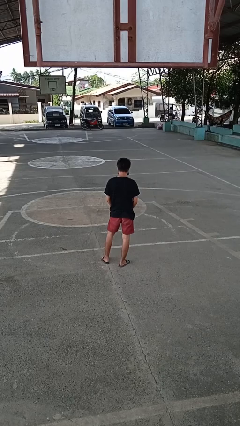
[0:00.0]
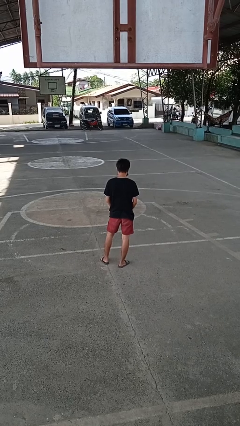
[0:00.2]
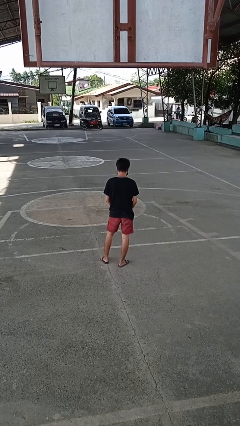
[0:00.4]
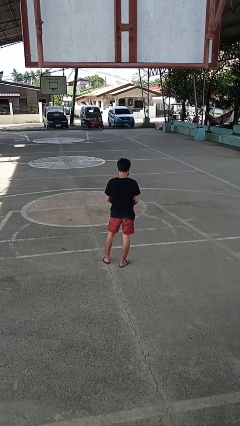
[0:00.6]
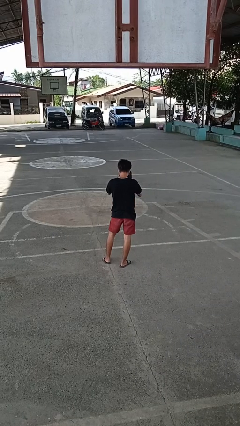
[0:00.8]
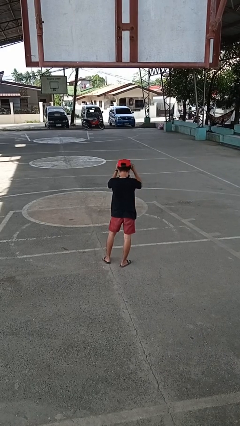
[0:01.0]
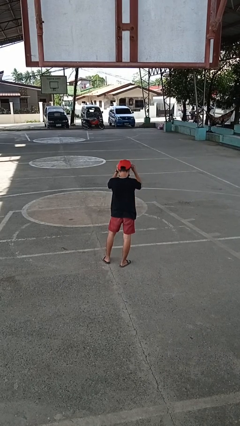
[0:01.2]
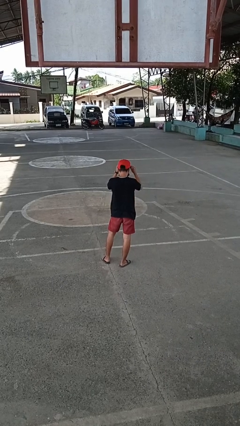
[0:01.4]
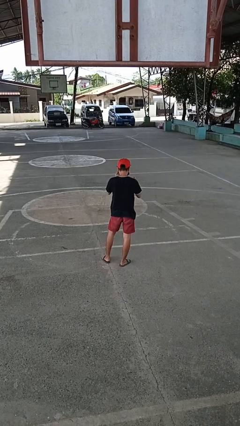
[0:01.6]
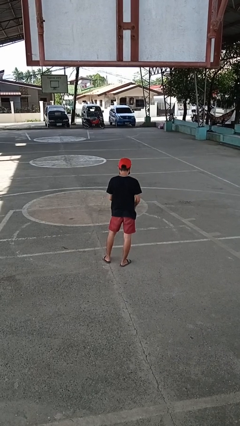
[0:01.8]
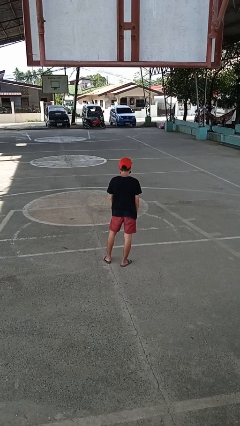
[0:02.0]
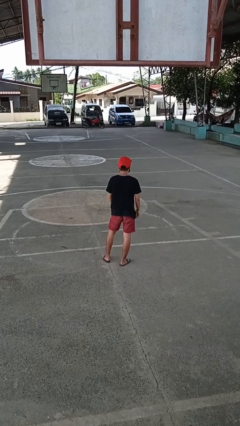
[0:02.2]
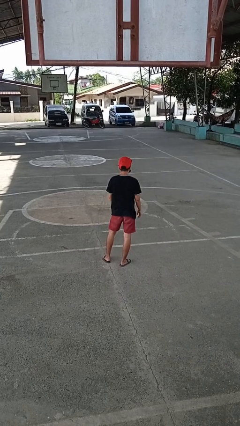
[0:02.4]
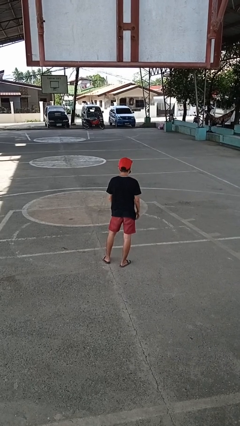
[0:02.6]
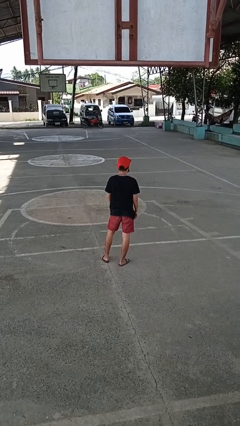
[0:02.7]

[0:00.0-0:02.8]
person puts on hat

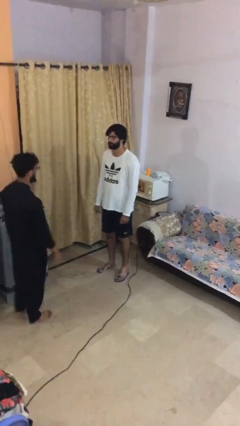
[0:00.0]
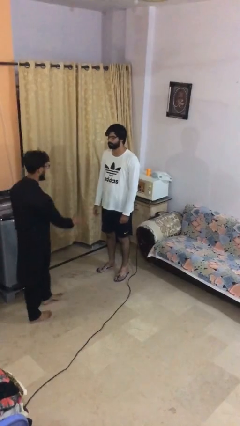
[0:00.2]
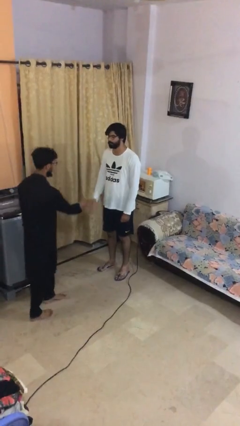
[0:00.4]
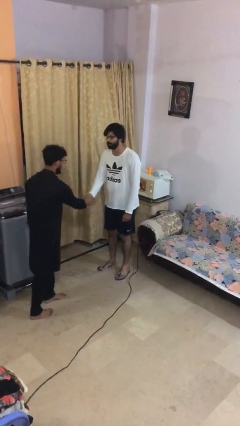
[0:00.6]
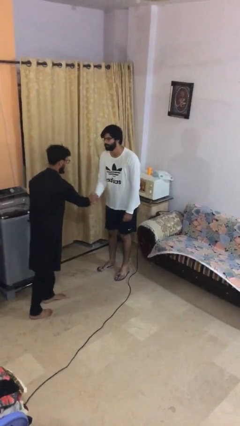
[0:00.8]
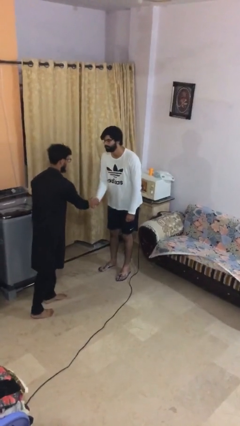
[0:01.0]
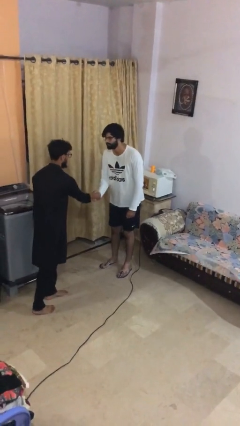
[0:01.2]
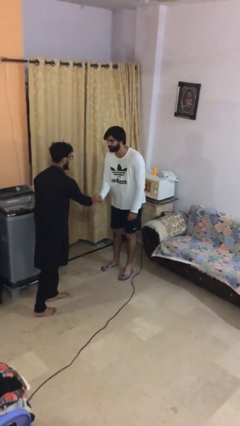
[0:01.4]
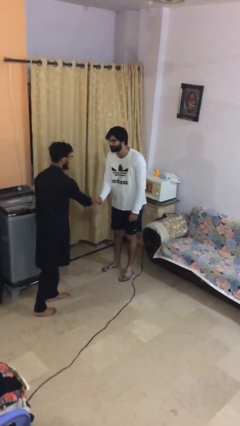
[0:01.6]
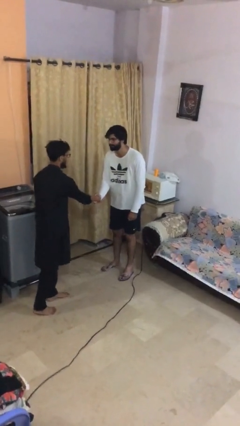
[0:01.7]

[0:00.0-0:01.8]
person shakes hand

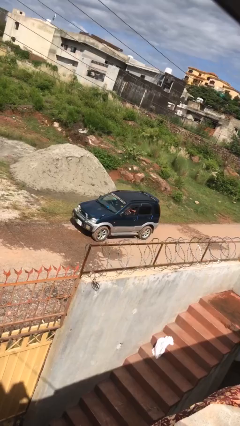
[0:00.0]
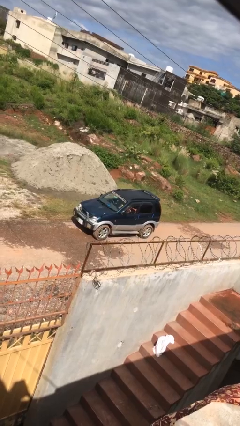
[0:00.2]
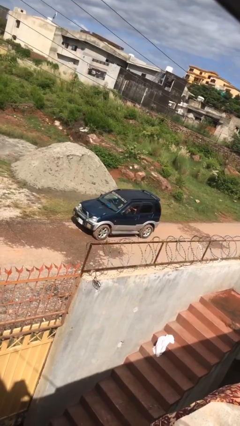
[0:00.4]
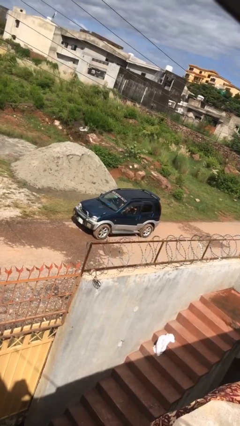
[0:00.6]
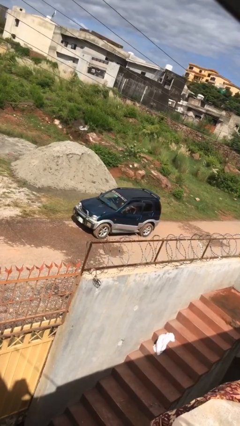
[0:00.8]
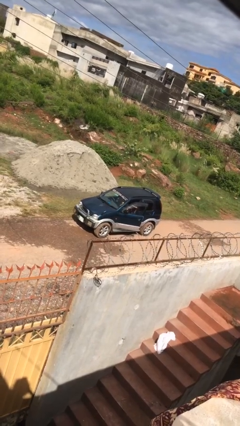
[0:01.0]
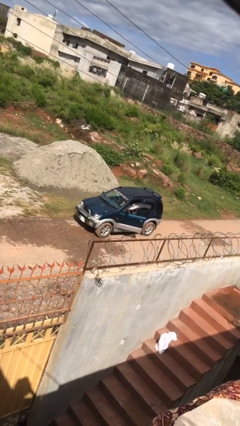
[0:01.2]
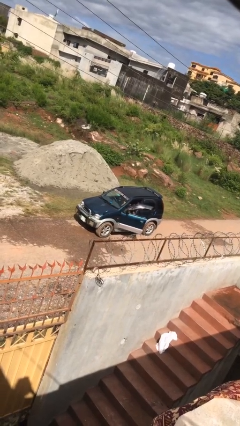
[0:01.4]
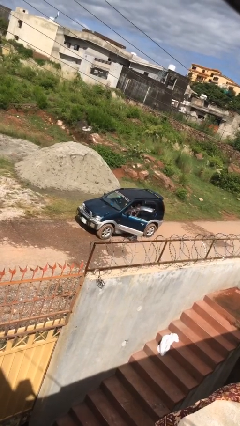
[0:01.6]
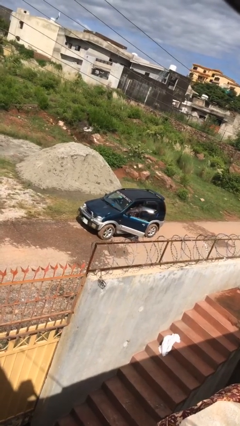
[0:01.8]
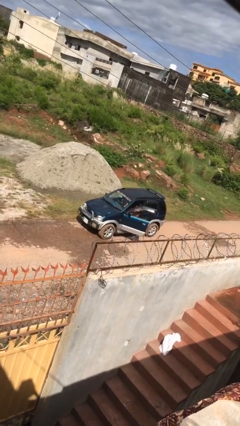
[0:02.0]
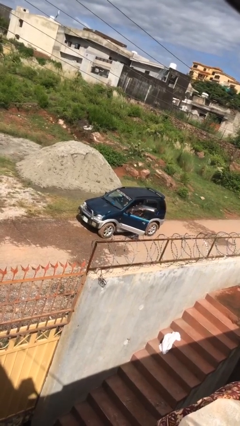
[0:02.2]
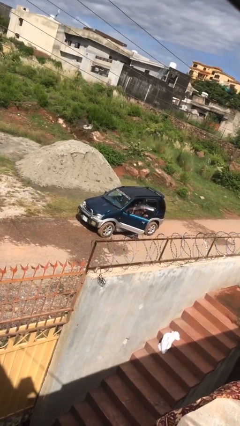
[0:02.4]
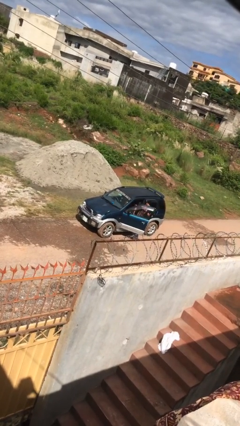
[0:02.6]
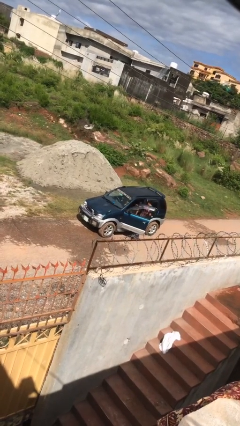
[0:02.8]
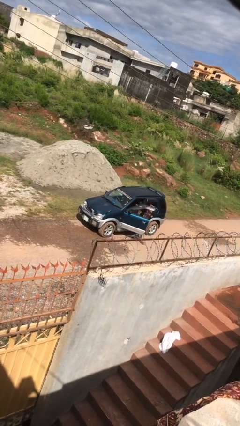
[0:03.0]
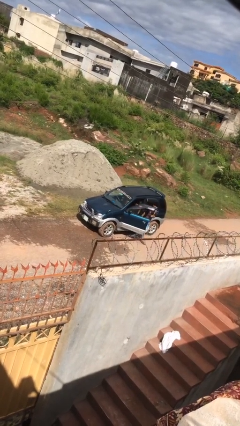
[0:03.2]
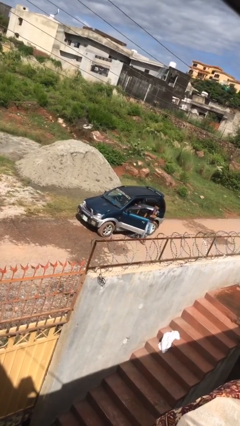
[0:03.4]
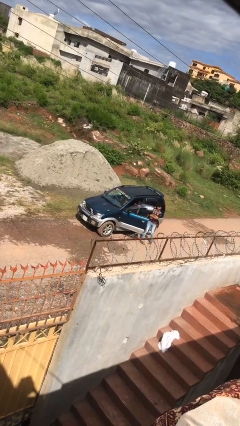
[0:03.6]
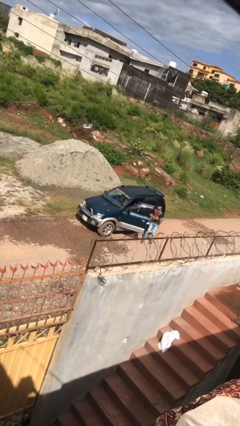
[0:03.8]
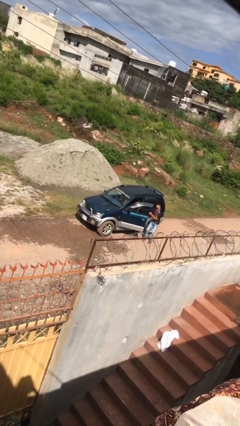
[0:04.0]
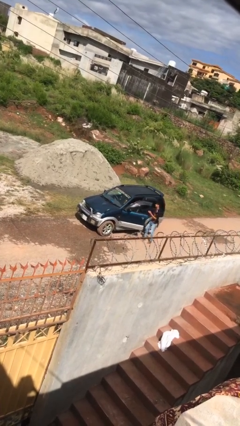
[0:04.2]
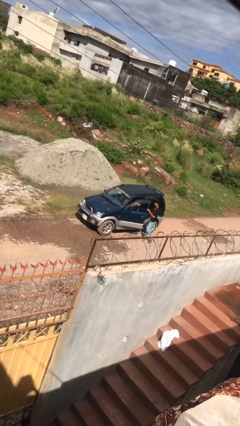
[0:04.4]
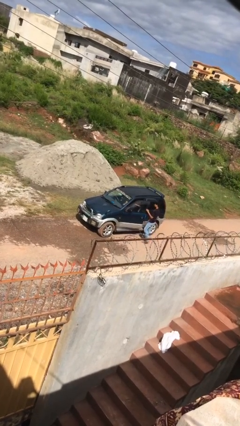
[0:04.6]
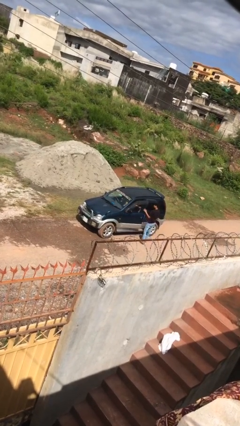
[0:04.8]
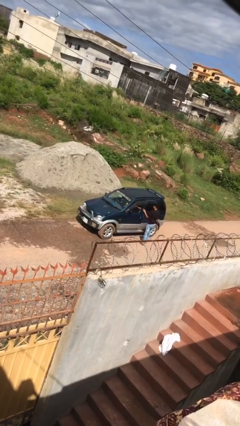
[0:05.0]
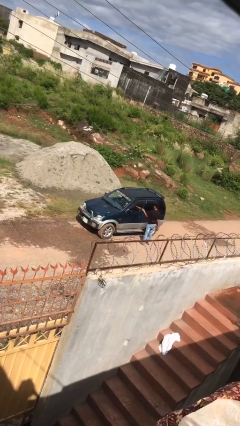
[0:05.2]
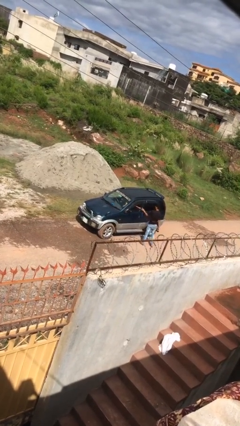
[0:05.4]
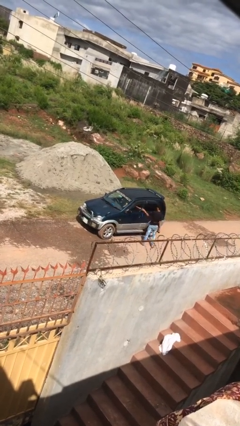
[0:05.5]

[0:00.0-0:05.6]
car drops off person

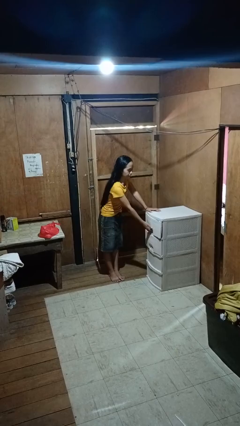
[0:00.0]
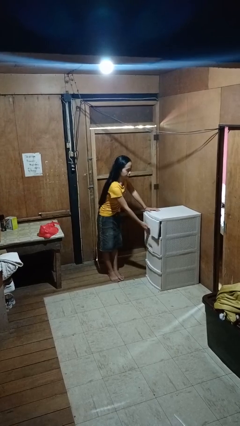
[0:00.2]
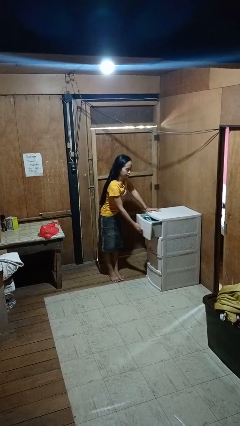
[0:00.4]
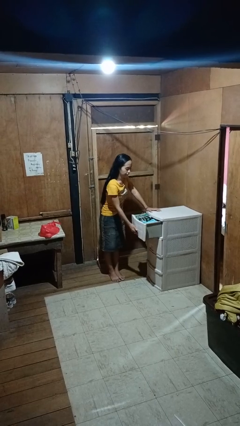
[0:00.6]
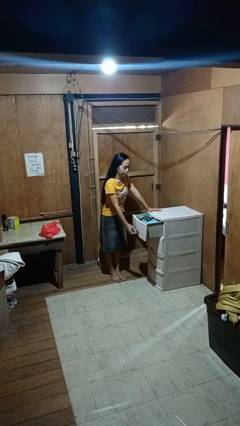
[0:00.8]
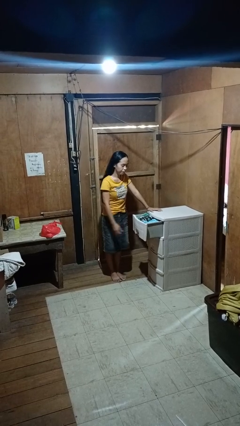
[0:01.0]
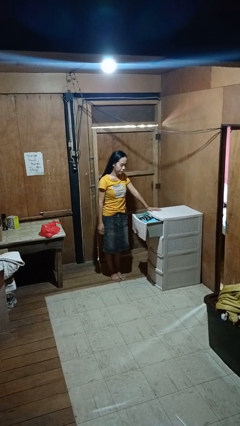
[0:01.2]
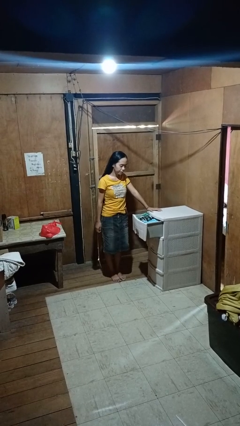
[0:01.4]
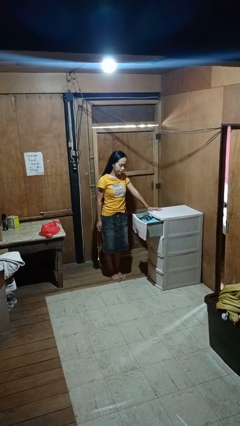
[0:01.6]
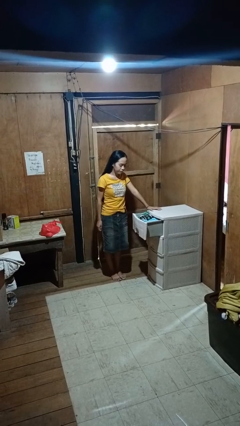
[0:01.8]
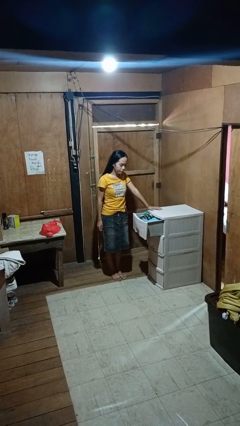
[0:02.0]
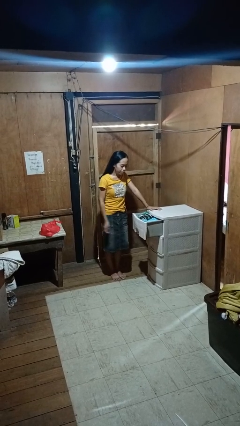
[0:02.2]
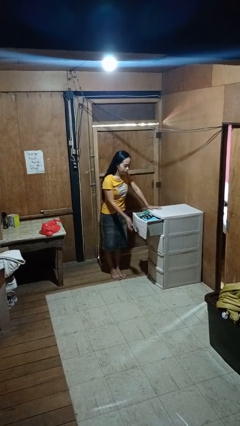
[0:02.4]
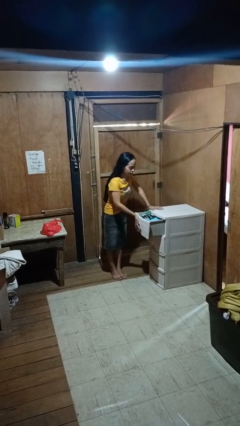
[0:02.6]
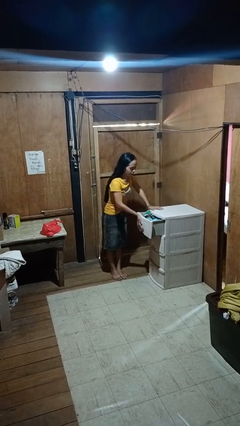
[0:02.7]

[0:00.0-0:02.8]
person opens dresser drawer

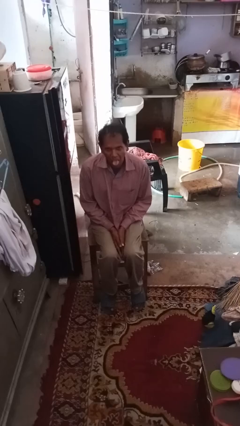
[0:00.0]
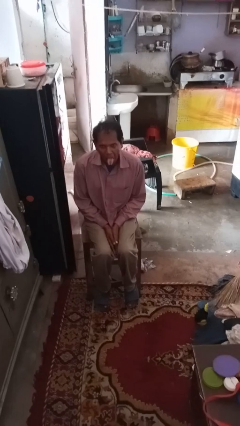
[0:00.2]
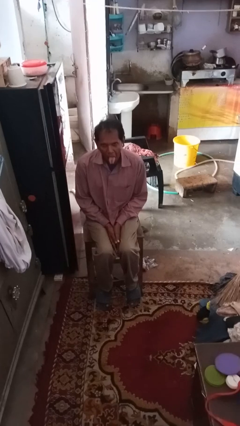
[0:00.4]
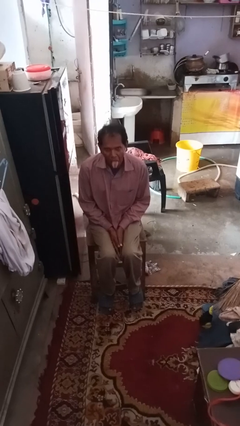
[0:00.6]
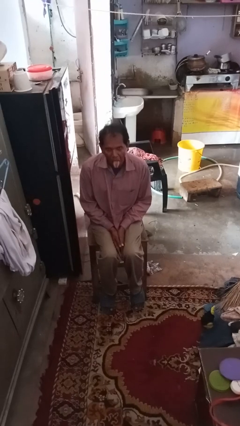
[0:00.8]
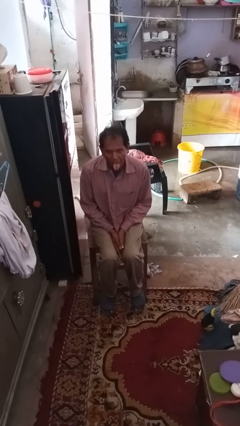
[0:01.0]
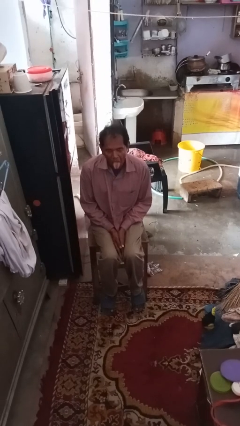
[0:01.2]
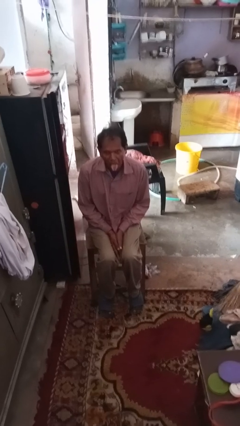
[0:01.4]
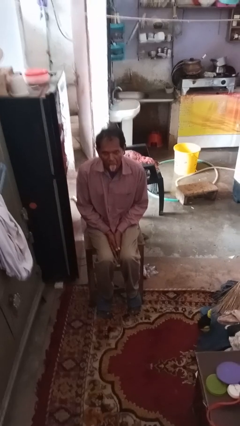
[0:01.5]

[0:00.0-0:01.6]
person sticks out tongue

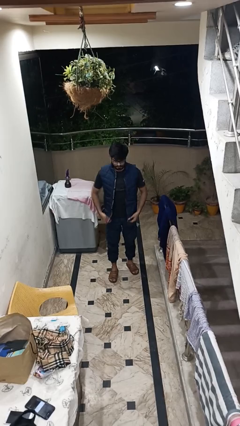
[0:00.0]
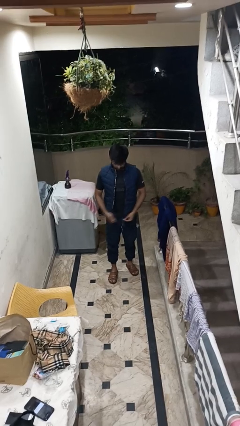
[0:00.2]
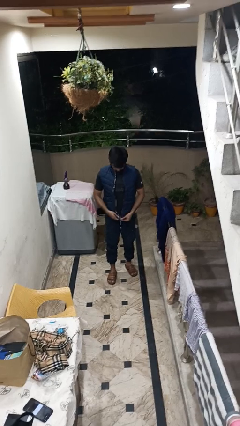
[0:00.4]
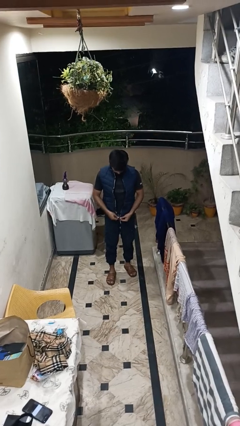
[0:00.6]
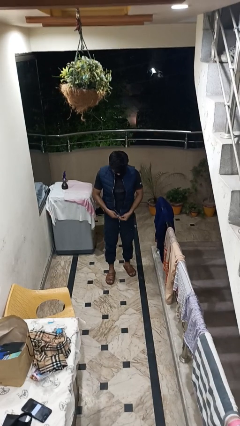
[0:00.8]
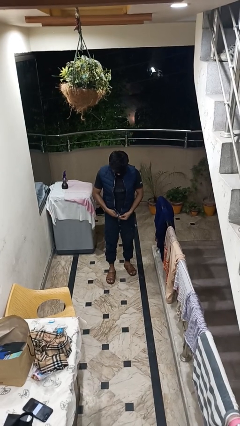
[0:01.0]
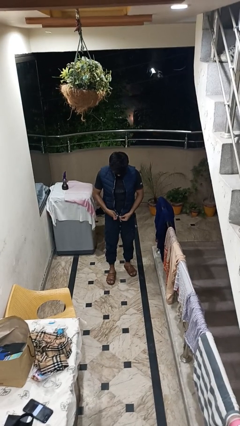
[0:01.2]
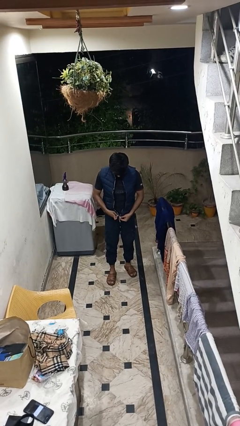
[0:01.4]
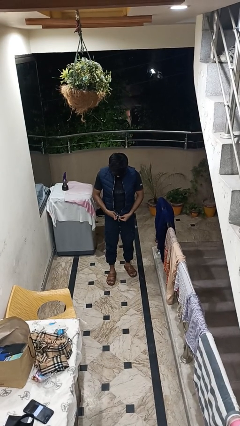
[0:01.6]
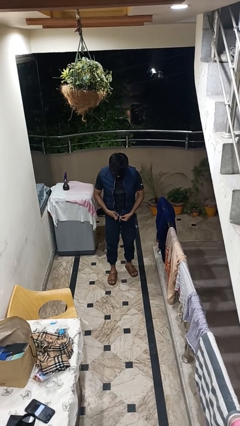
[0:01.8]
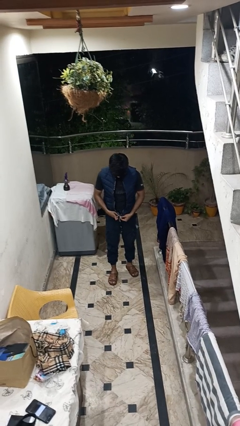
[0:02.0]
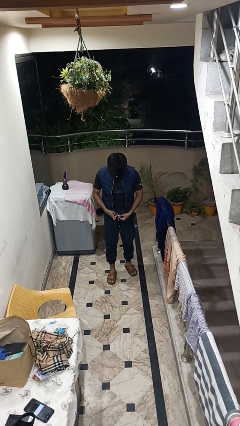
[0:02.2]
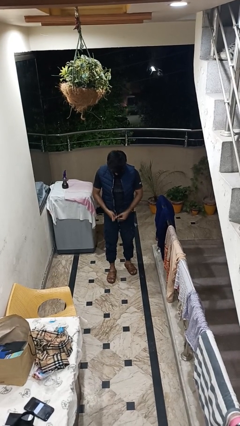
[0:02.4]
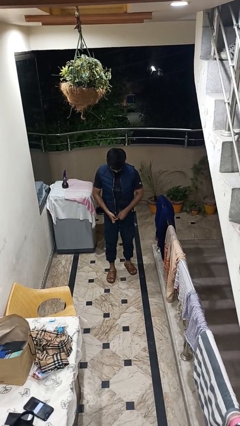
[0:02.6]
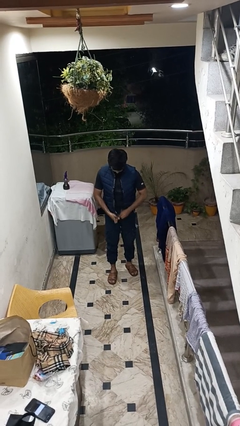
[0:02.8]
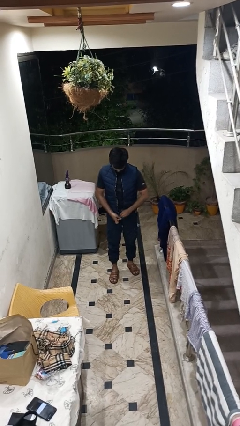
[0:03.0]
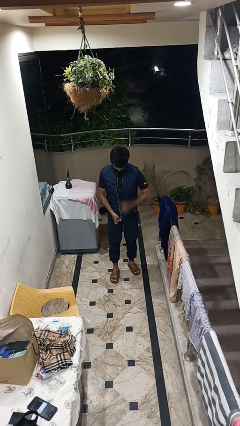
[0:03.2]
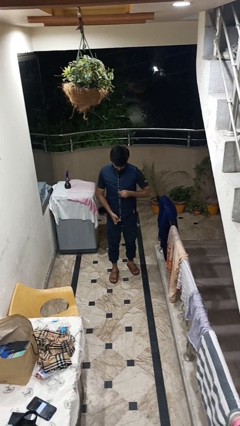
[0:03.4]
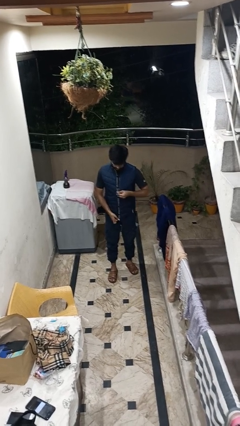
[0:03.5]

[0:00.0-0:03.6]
person zips up jacket
